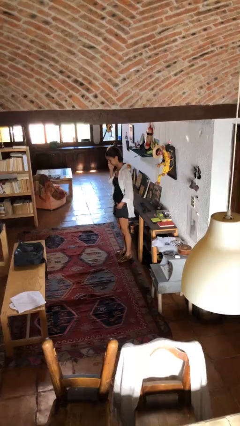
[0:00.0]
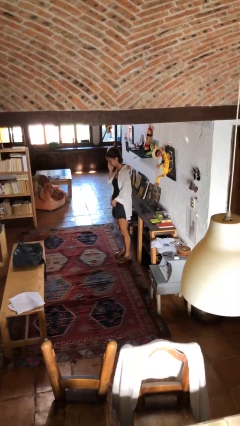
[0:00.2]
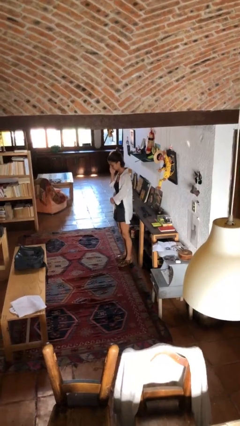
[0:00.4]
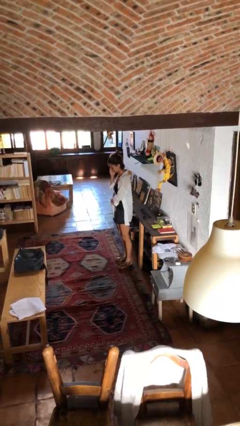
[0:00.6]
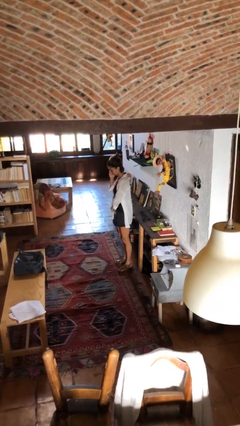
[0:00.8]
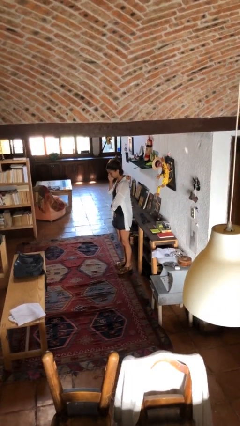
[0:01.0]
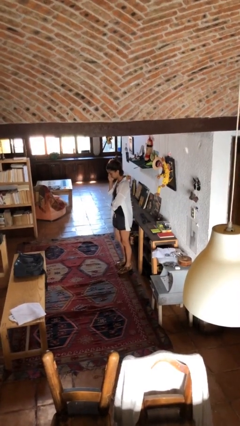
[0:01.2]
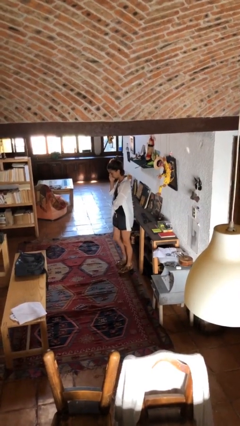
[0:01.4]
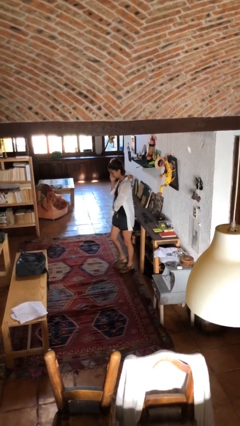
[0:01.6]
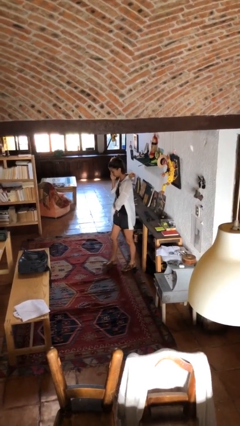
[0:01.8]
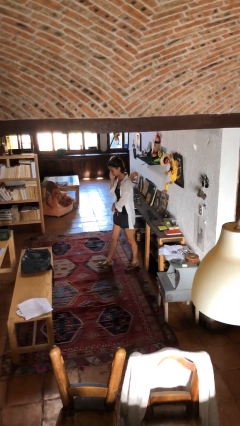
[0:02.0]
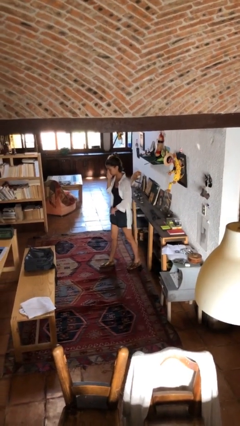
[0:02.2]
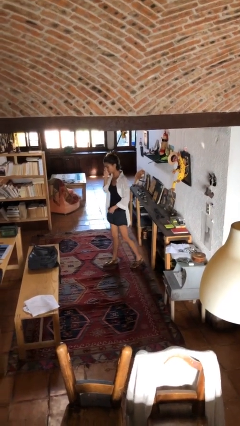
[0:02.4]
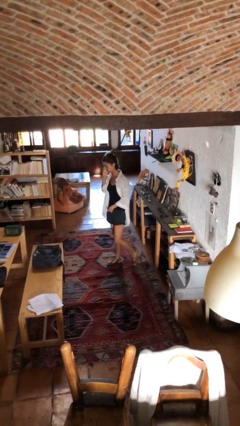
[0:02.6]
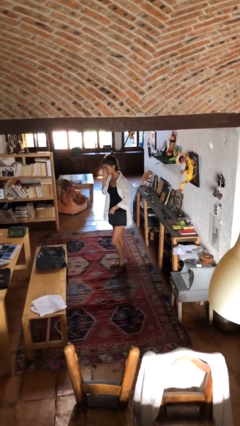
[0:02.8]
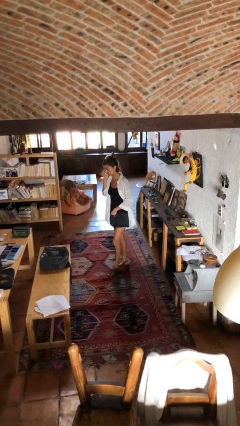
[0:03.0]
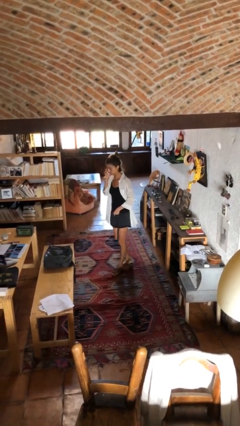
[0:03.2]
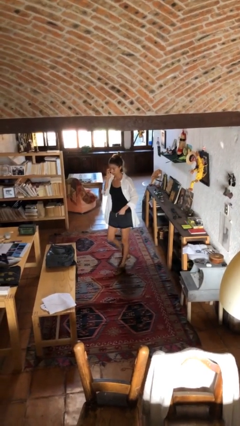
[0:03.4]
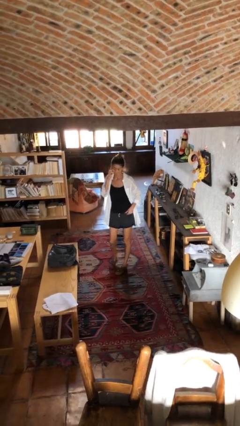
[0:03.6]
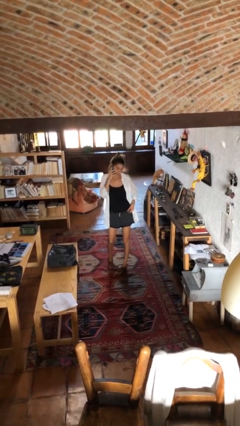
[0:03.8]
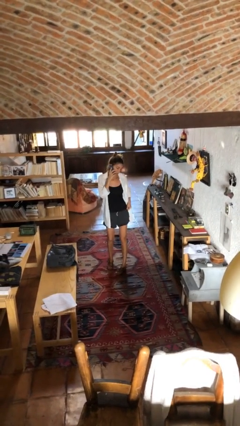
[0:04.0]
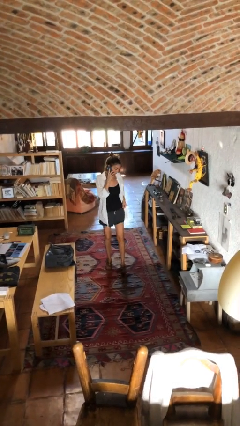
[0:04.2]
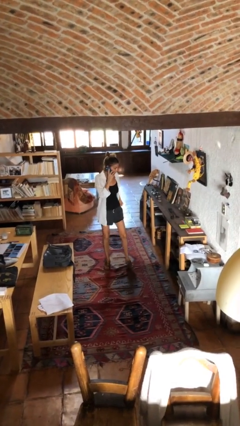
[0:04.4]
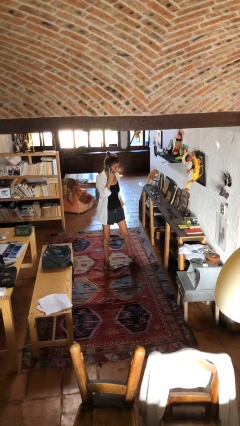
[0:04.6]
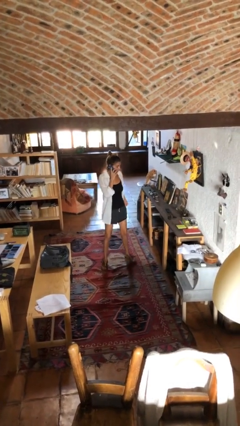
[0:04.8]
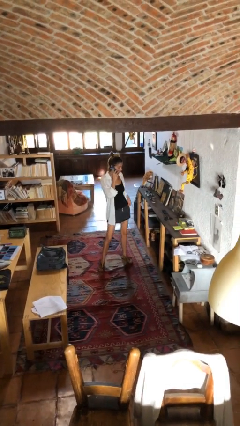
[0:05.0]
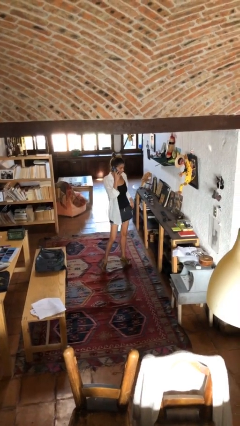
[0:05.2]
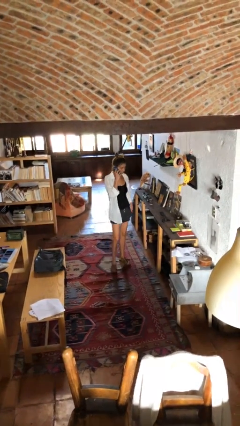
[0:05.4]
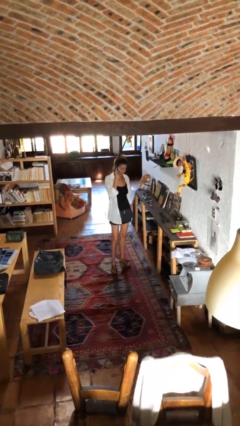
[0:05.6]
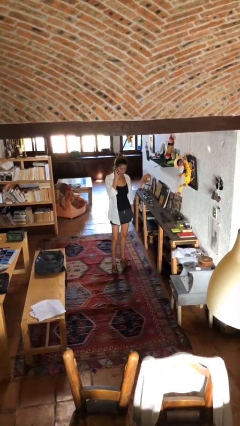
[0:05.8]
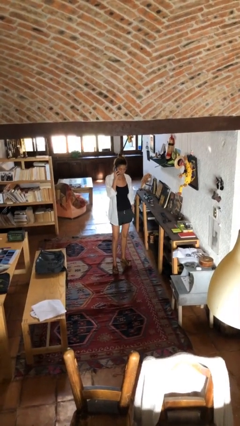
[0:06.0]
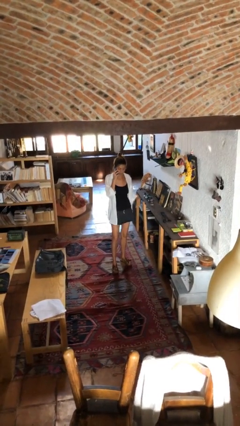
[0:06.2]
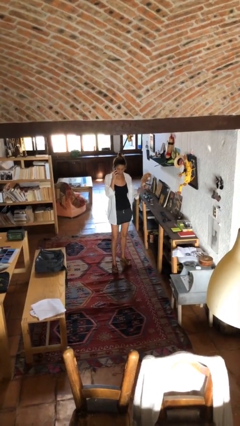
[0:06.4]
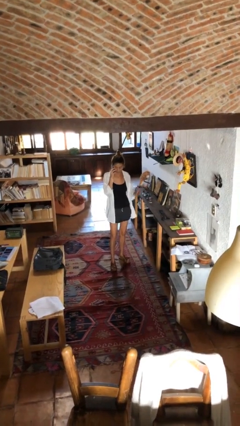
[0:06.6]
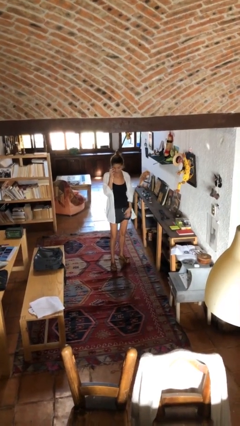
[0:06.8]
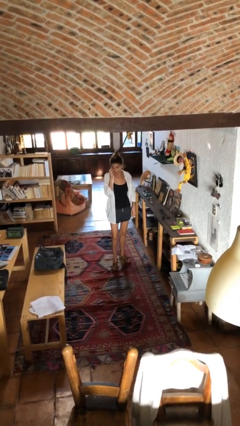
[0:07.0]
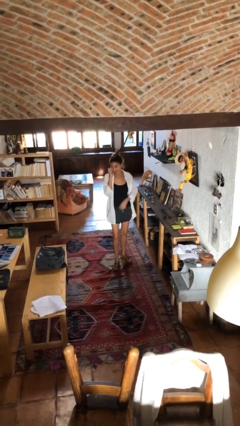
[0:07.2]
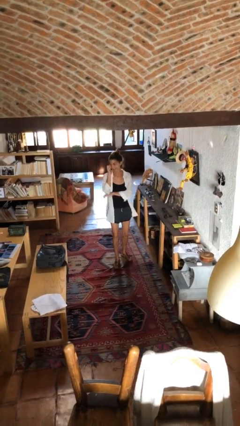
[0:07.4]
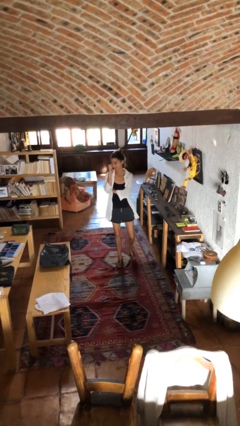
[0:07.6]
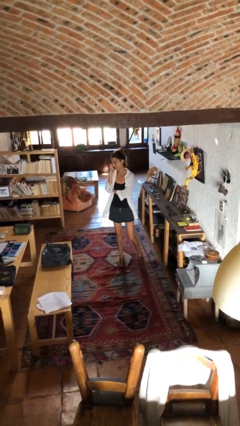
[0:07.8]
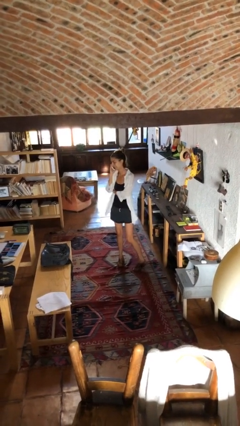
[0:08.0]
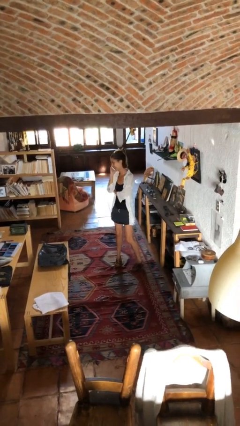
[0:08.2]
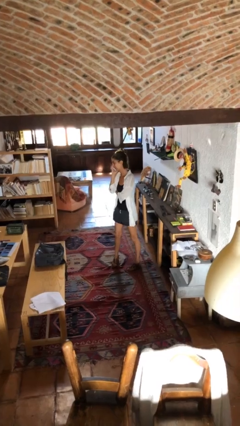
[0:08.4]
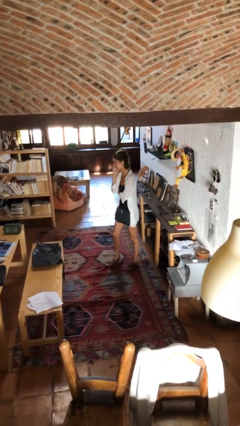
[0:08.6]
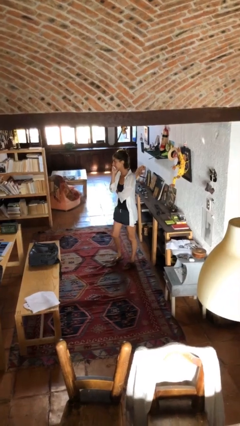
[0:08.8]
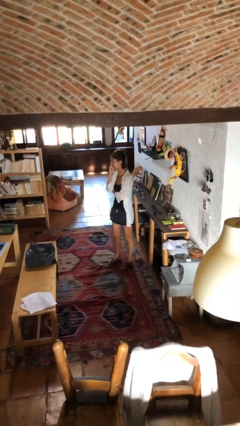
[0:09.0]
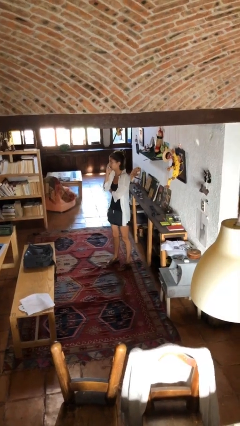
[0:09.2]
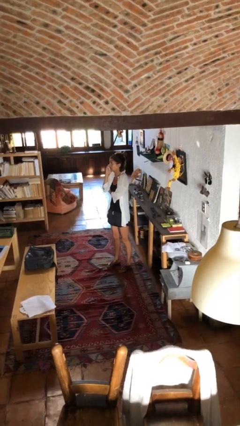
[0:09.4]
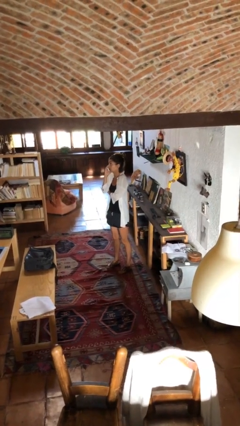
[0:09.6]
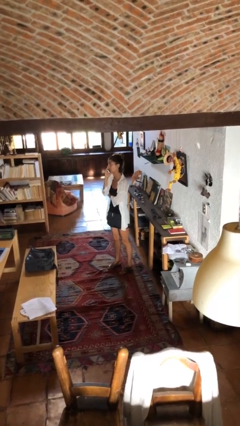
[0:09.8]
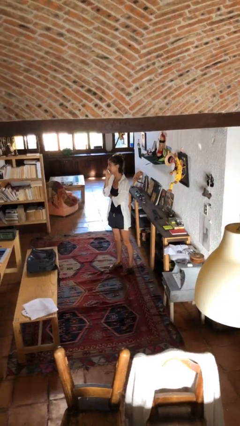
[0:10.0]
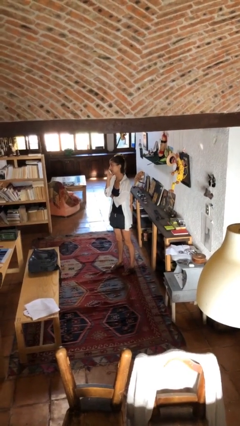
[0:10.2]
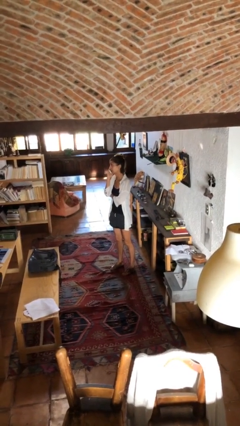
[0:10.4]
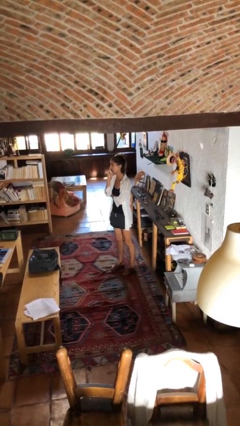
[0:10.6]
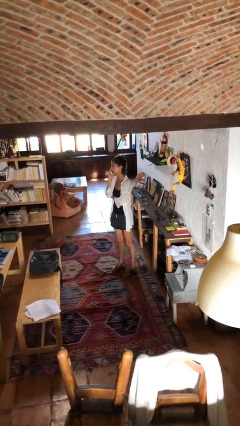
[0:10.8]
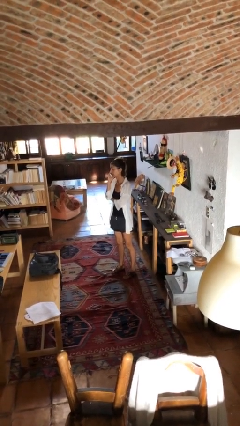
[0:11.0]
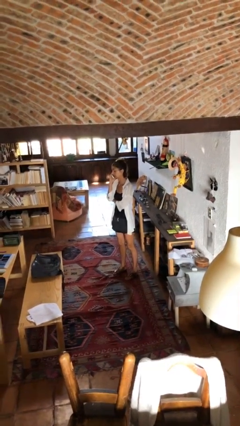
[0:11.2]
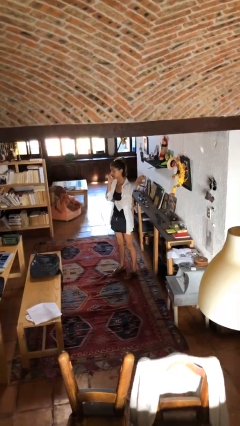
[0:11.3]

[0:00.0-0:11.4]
person talks on phone

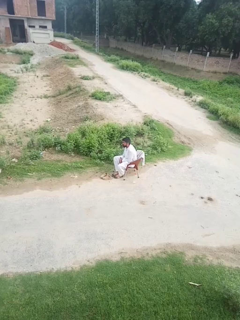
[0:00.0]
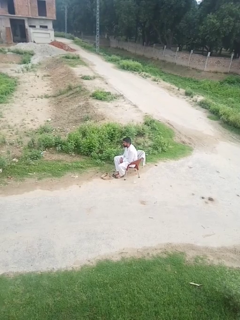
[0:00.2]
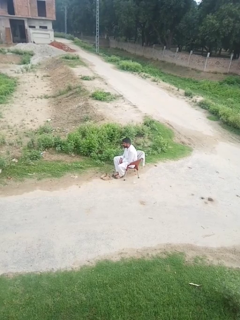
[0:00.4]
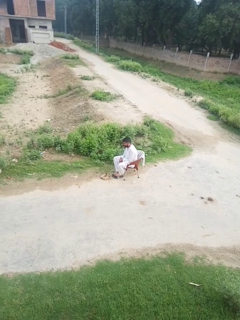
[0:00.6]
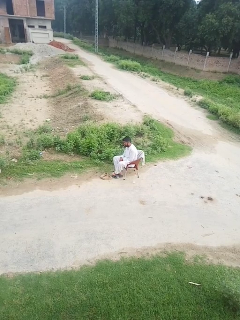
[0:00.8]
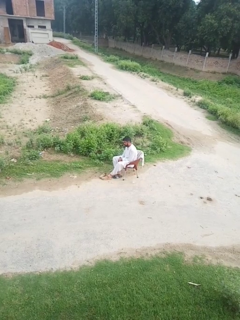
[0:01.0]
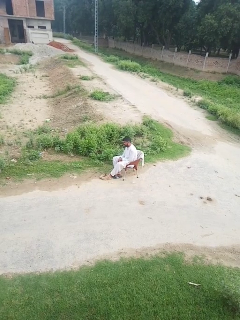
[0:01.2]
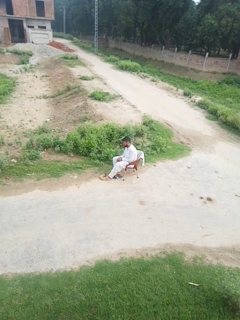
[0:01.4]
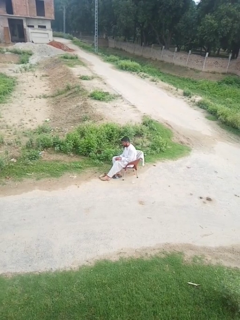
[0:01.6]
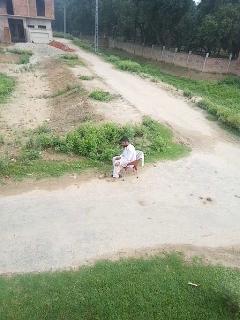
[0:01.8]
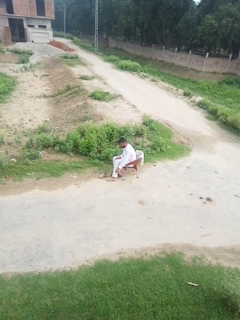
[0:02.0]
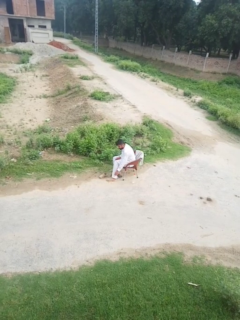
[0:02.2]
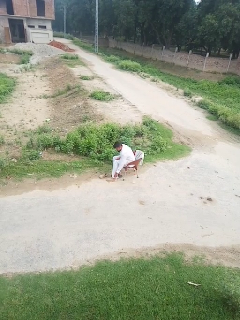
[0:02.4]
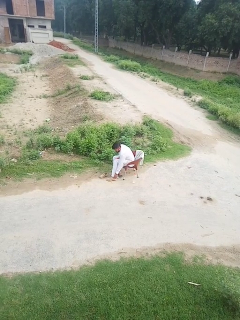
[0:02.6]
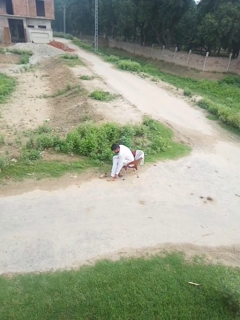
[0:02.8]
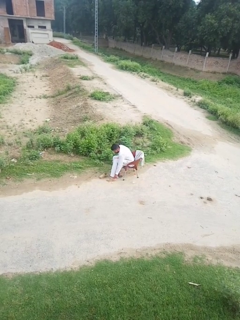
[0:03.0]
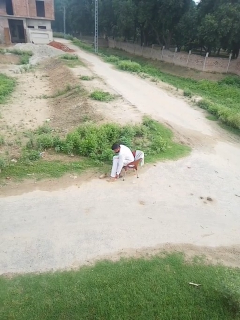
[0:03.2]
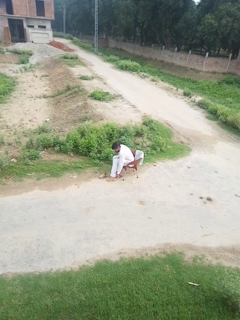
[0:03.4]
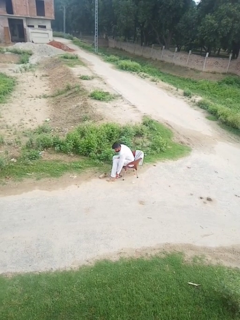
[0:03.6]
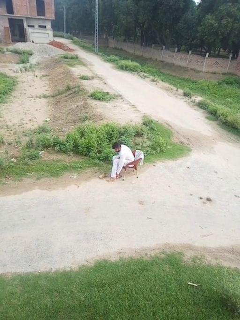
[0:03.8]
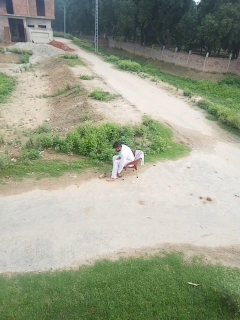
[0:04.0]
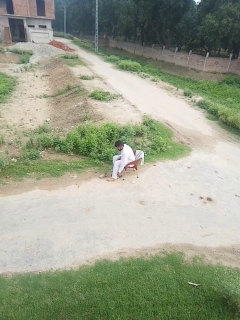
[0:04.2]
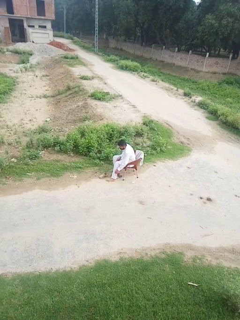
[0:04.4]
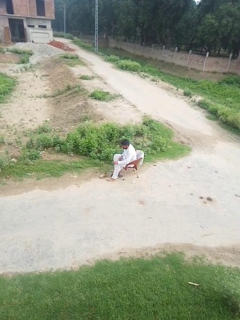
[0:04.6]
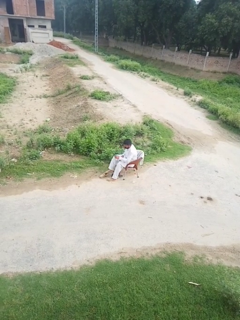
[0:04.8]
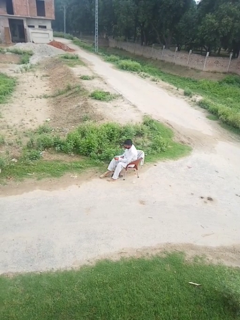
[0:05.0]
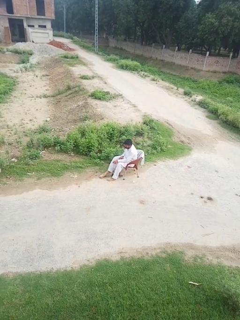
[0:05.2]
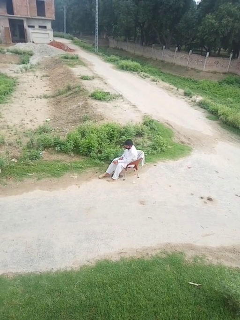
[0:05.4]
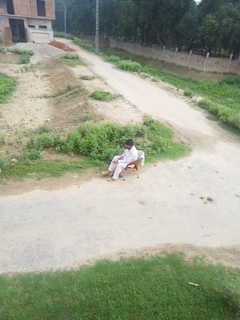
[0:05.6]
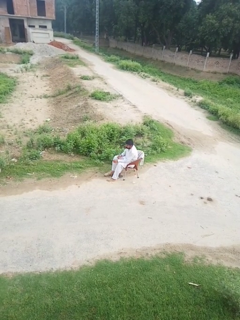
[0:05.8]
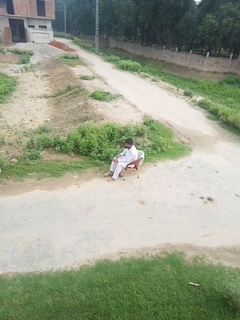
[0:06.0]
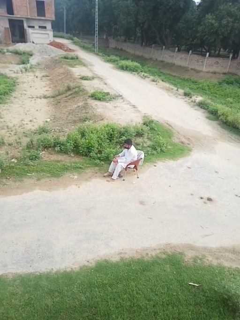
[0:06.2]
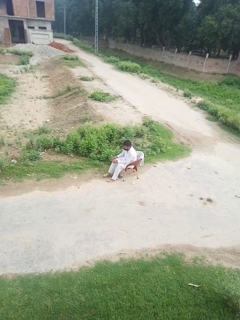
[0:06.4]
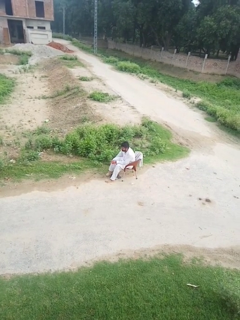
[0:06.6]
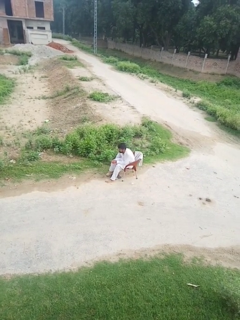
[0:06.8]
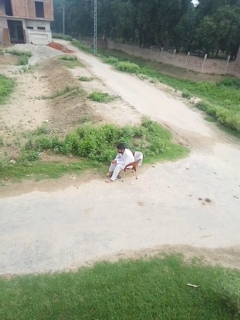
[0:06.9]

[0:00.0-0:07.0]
person puts on shoes

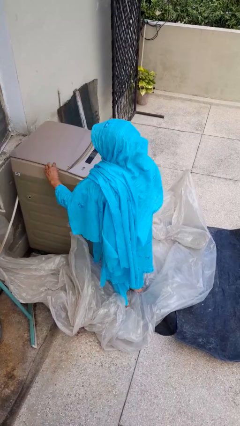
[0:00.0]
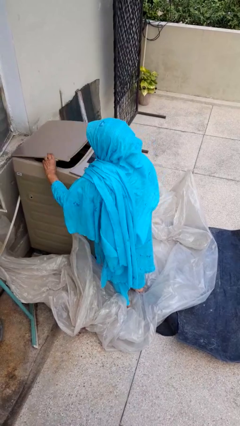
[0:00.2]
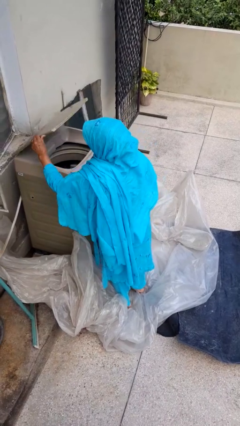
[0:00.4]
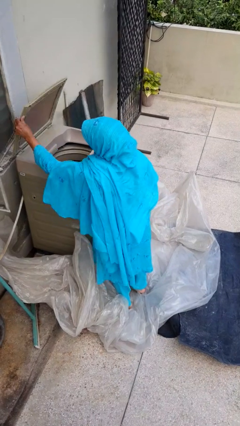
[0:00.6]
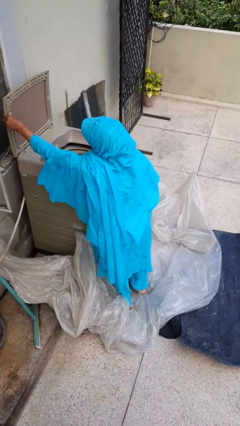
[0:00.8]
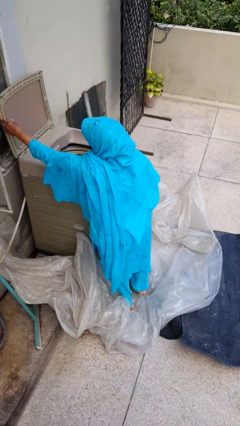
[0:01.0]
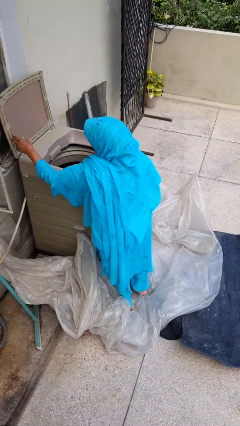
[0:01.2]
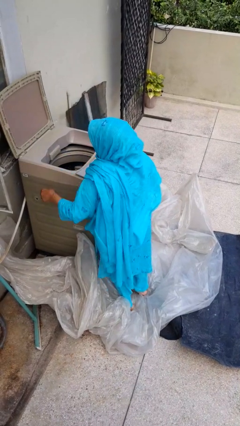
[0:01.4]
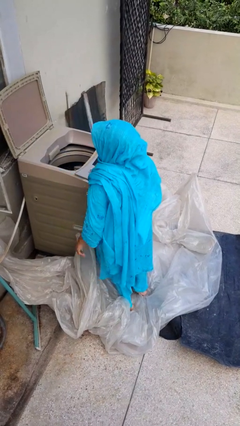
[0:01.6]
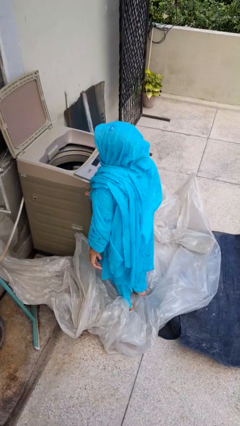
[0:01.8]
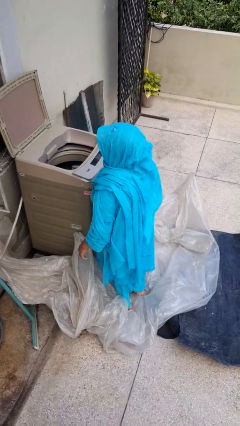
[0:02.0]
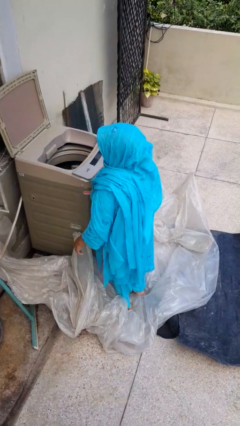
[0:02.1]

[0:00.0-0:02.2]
person opens clothes washer
